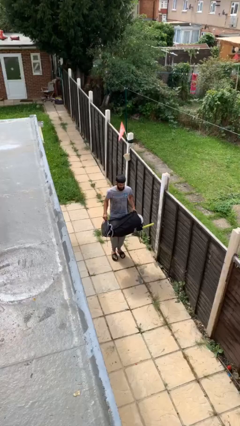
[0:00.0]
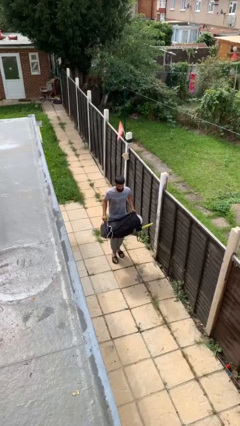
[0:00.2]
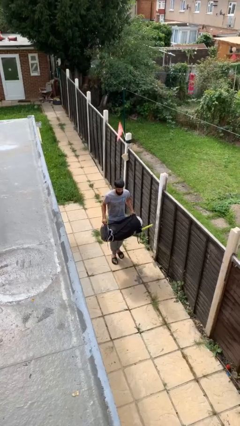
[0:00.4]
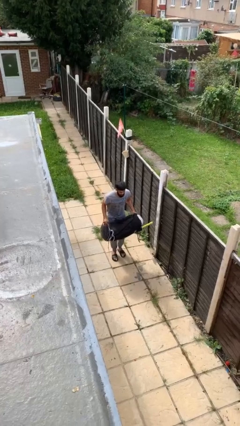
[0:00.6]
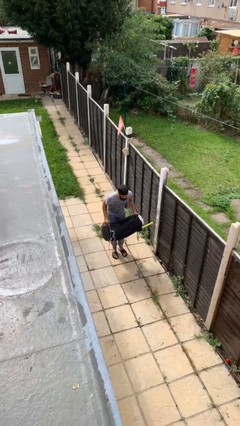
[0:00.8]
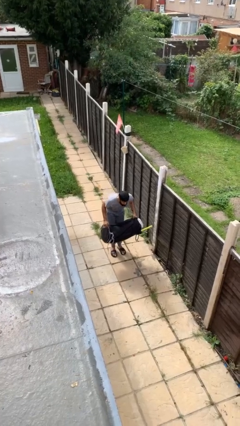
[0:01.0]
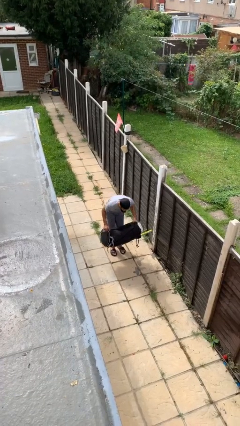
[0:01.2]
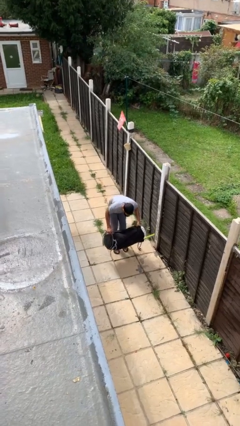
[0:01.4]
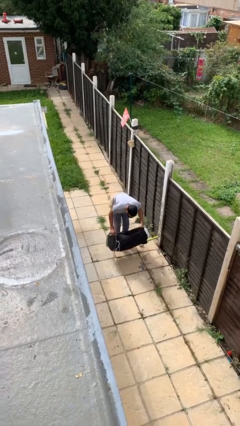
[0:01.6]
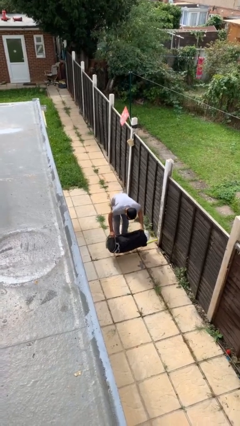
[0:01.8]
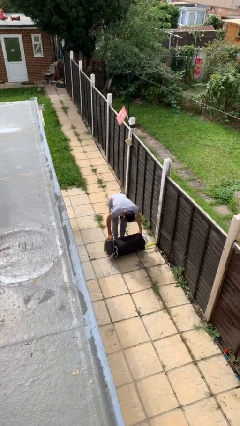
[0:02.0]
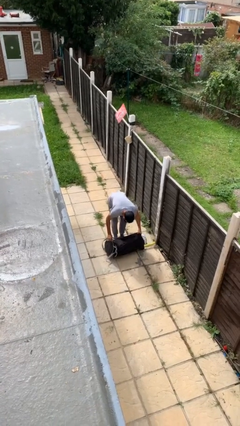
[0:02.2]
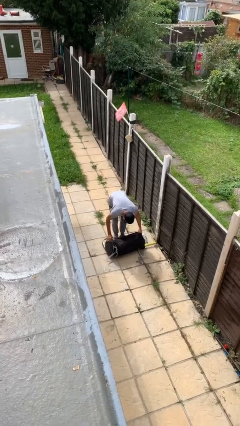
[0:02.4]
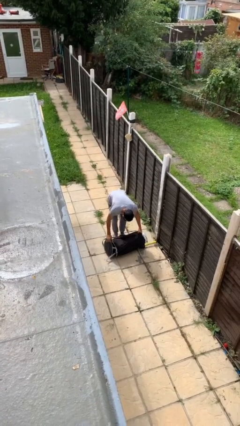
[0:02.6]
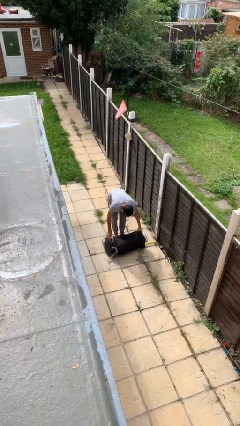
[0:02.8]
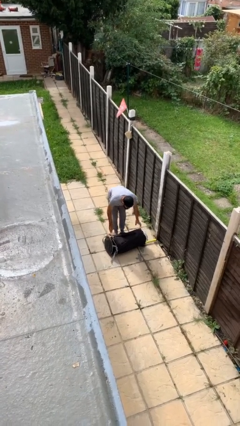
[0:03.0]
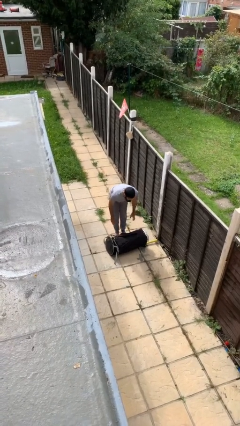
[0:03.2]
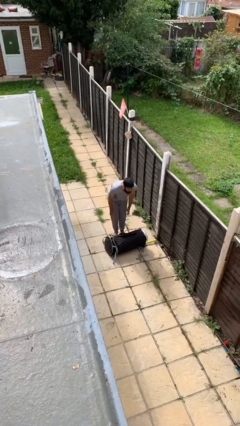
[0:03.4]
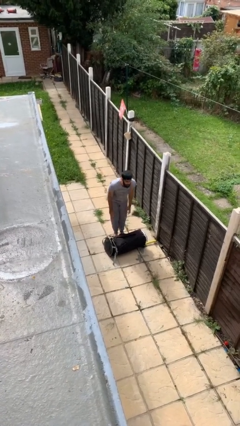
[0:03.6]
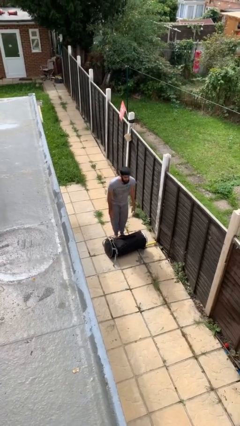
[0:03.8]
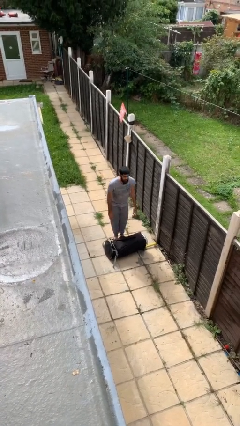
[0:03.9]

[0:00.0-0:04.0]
person puts down object on floor

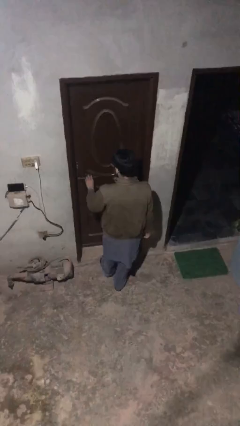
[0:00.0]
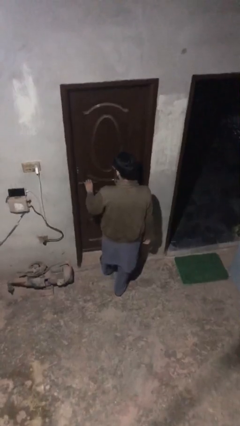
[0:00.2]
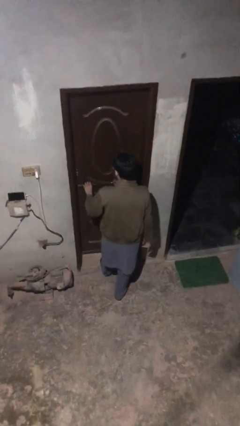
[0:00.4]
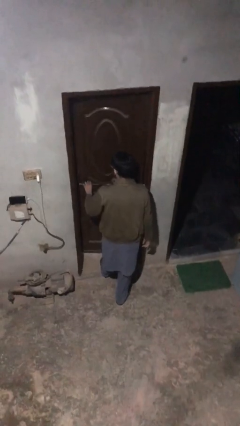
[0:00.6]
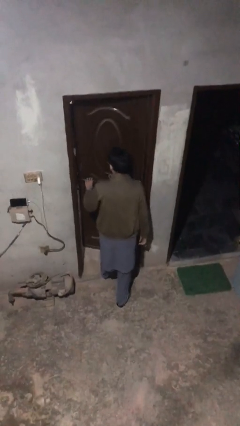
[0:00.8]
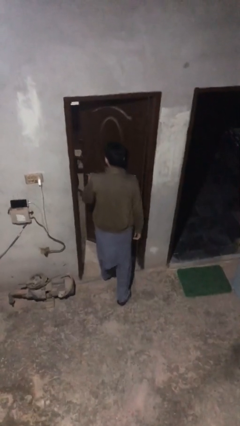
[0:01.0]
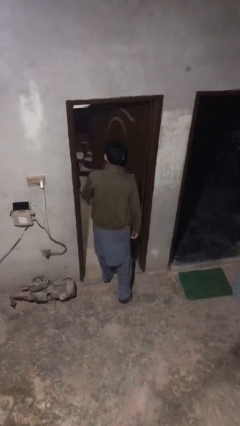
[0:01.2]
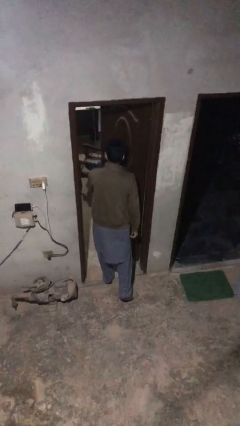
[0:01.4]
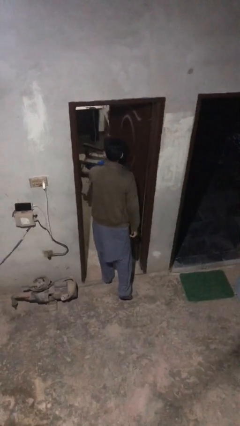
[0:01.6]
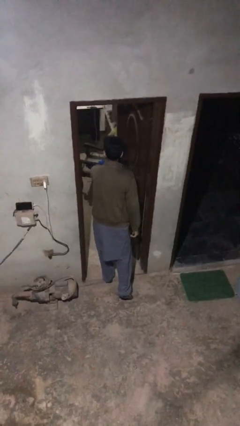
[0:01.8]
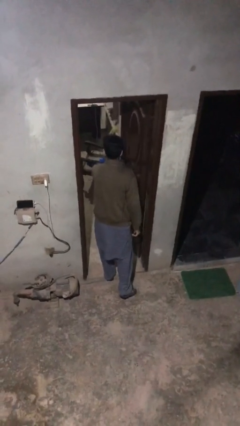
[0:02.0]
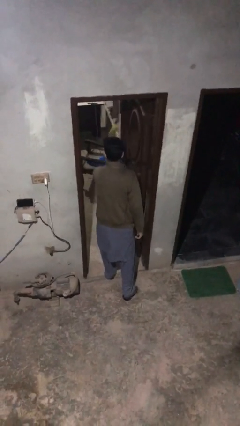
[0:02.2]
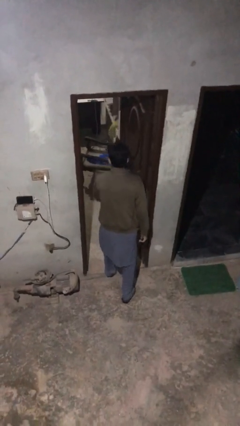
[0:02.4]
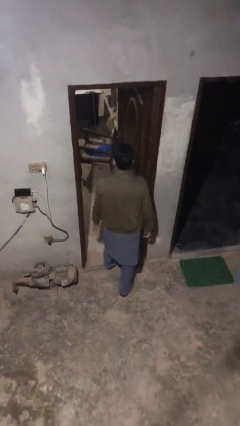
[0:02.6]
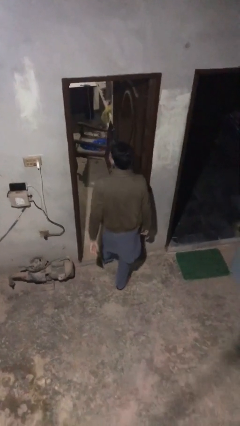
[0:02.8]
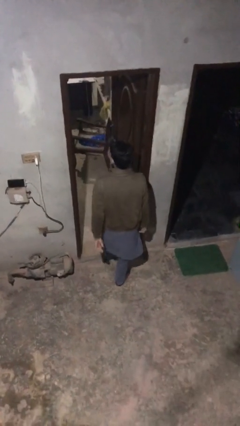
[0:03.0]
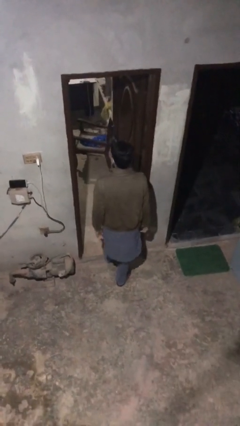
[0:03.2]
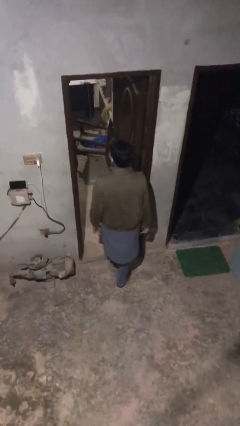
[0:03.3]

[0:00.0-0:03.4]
person opens facility door

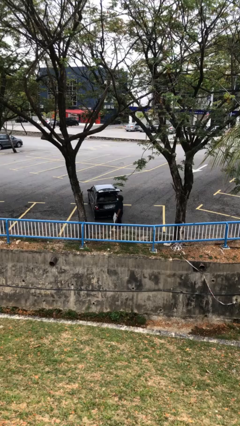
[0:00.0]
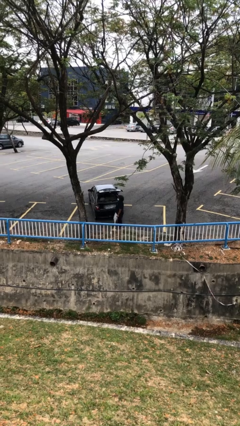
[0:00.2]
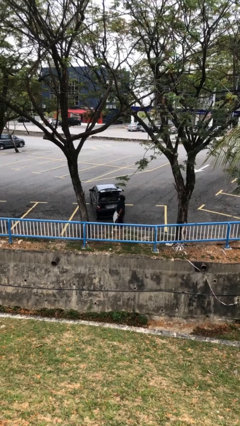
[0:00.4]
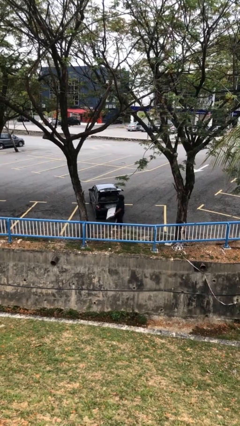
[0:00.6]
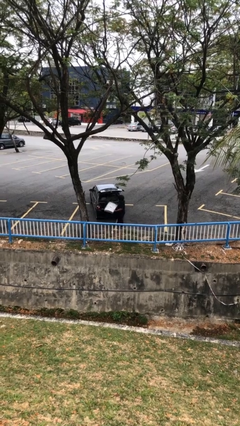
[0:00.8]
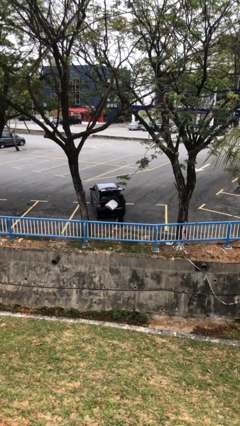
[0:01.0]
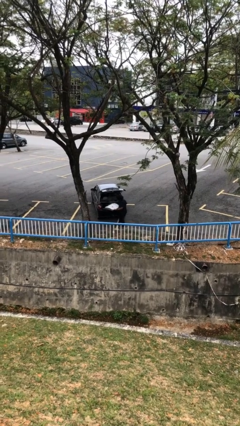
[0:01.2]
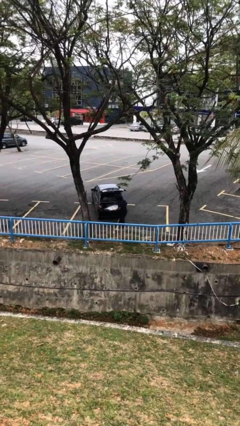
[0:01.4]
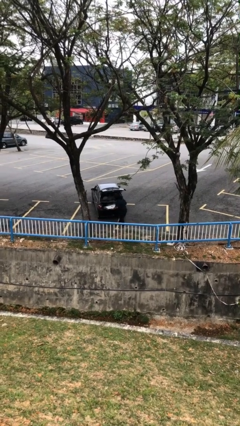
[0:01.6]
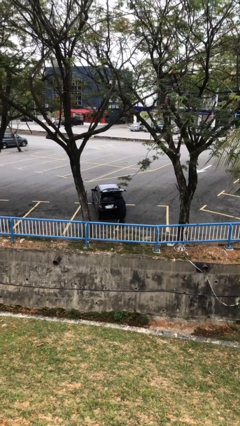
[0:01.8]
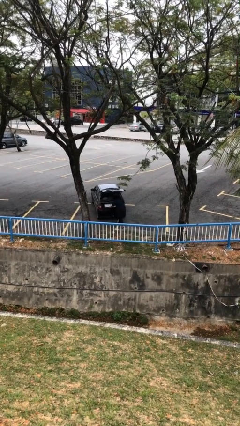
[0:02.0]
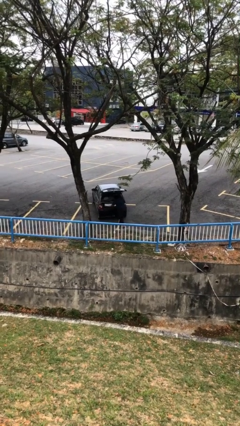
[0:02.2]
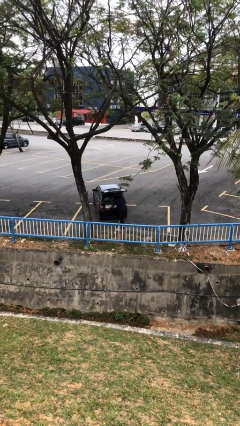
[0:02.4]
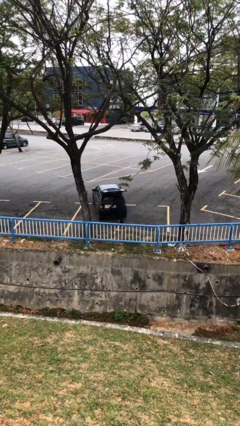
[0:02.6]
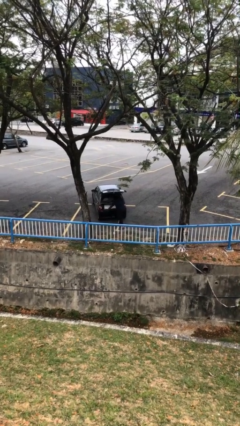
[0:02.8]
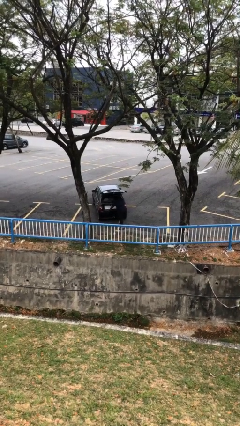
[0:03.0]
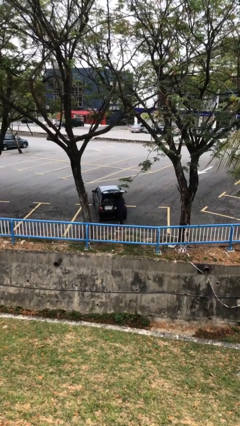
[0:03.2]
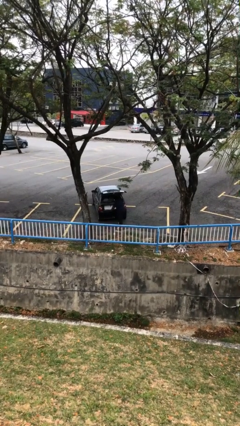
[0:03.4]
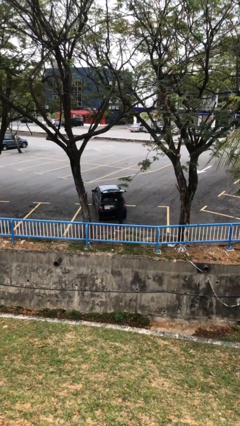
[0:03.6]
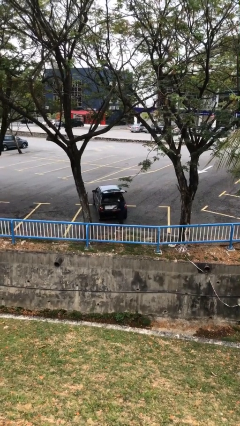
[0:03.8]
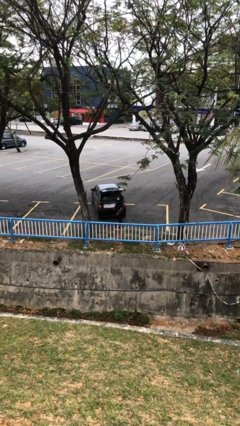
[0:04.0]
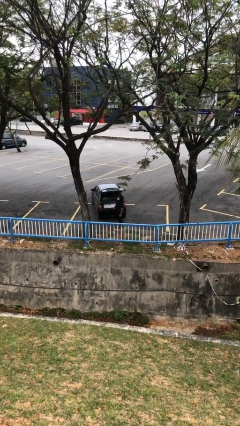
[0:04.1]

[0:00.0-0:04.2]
person loads car

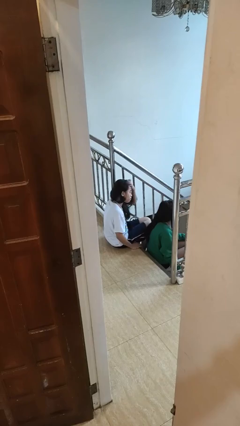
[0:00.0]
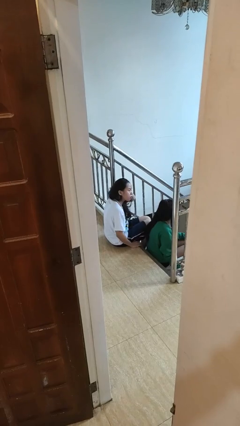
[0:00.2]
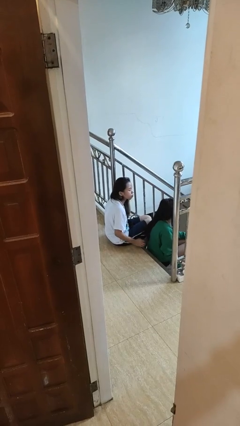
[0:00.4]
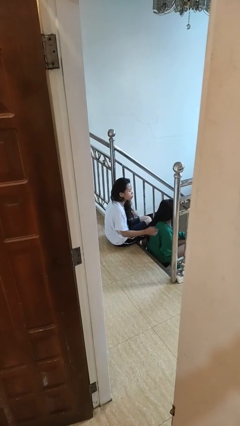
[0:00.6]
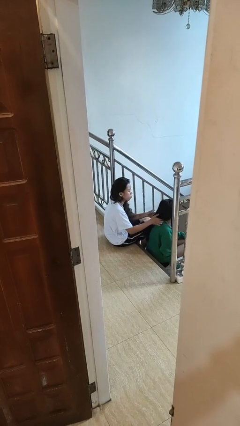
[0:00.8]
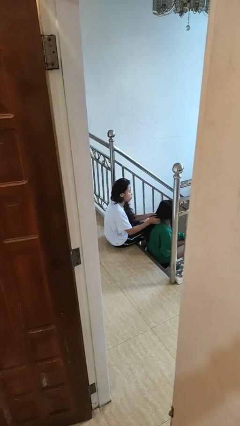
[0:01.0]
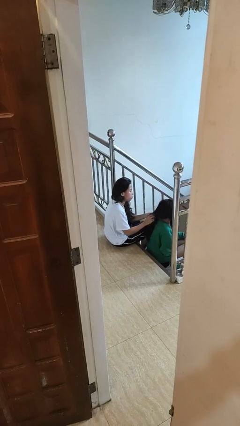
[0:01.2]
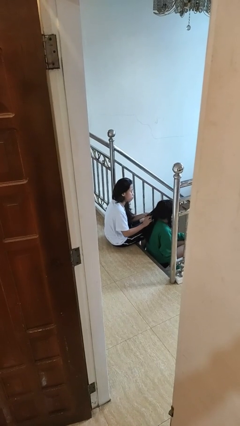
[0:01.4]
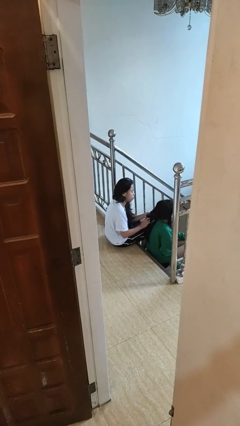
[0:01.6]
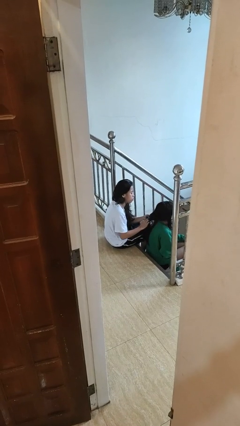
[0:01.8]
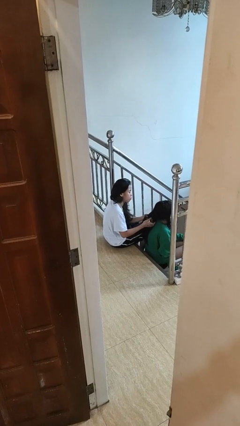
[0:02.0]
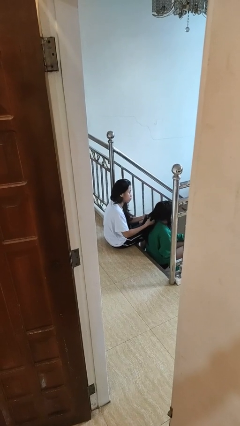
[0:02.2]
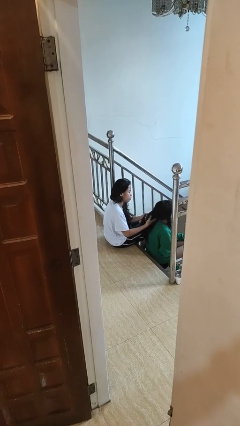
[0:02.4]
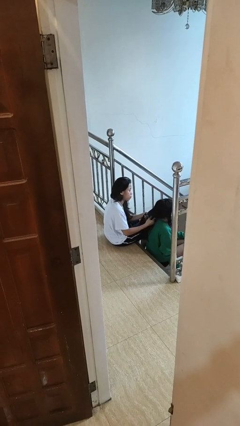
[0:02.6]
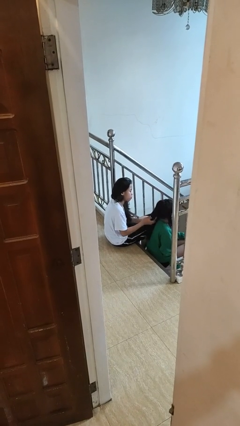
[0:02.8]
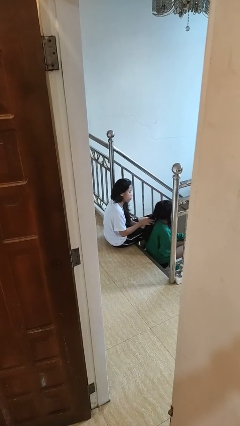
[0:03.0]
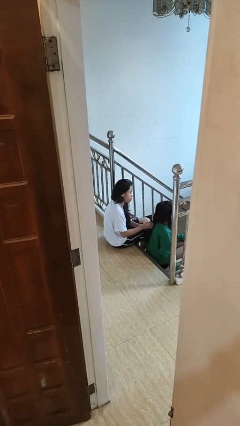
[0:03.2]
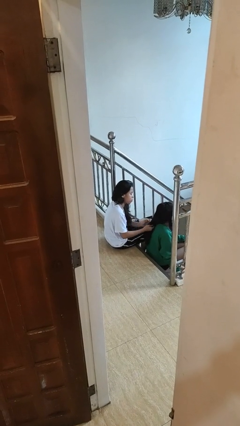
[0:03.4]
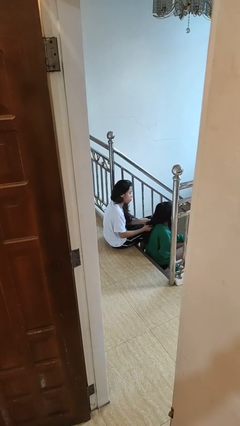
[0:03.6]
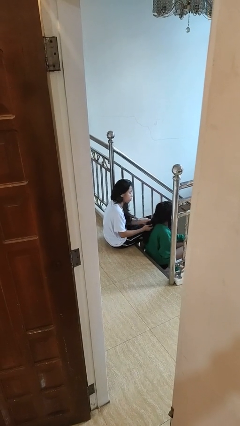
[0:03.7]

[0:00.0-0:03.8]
person braids hair of person

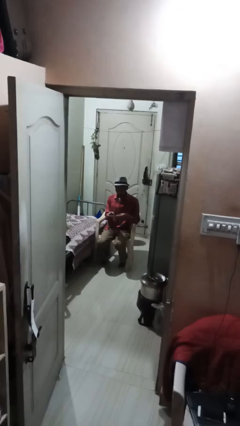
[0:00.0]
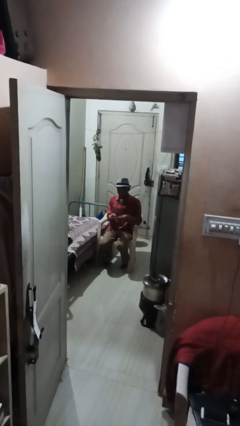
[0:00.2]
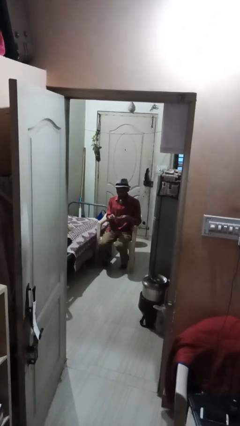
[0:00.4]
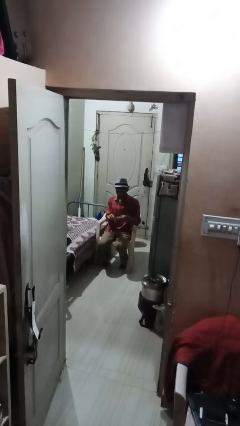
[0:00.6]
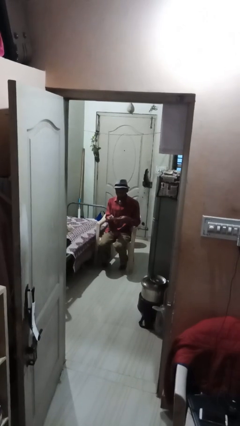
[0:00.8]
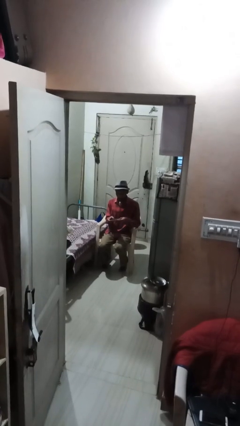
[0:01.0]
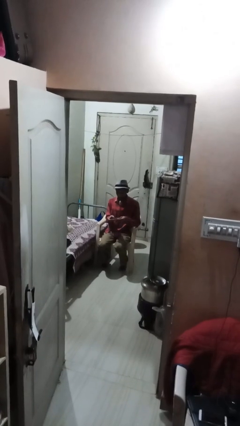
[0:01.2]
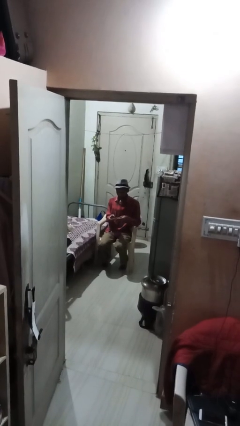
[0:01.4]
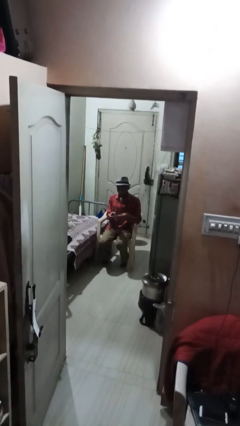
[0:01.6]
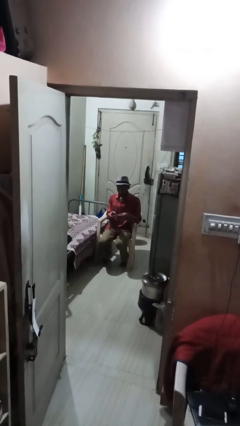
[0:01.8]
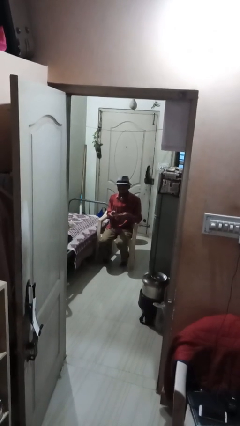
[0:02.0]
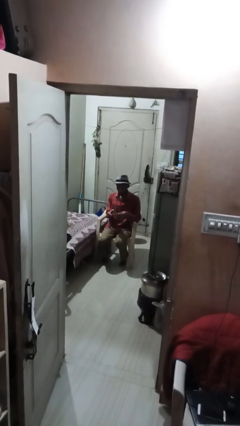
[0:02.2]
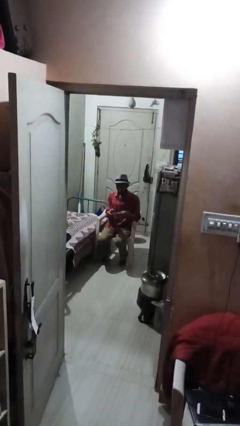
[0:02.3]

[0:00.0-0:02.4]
person clips fingernails
